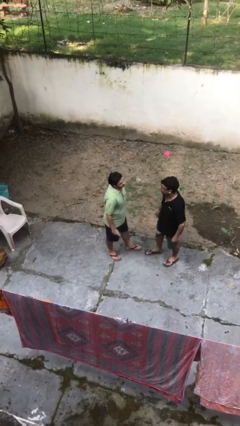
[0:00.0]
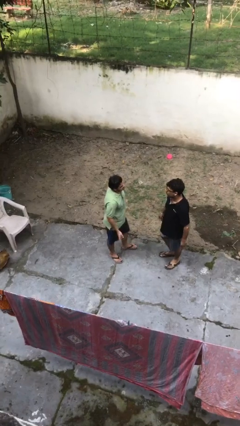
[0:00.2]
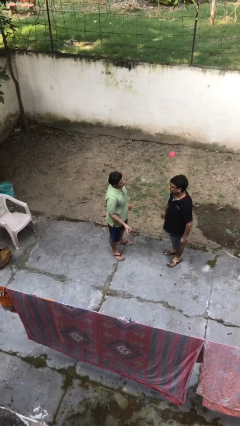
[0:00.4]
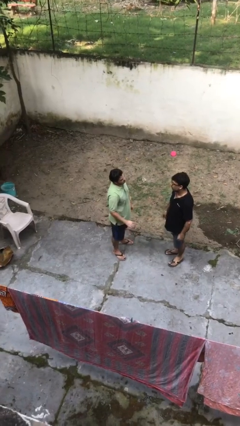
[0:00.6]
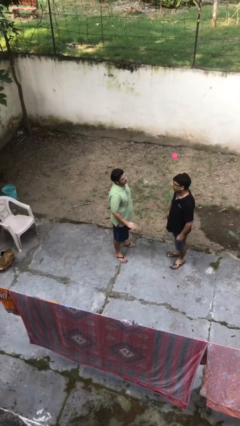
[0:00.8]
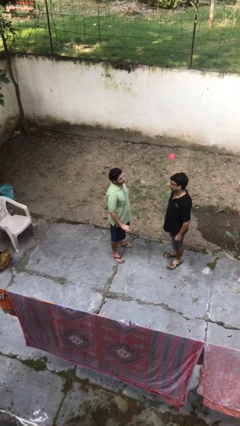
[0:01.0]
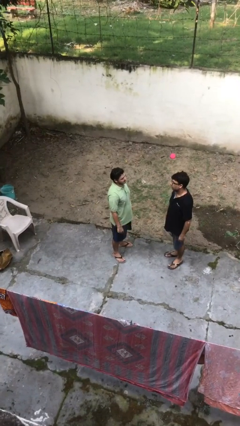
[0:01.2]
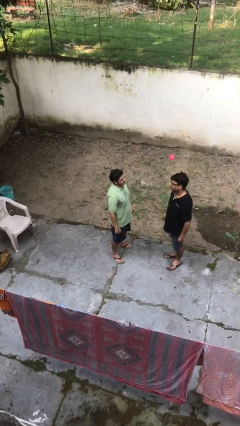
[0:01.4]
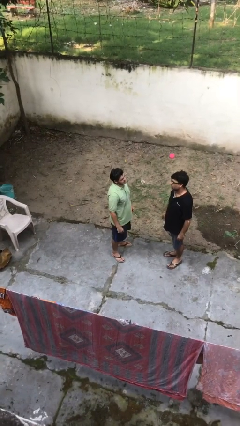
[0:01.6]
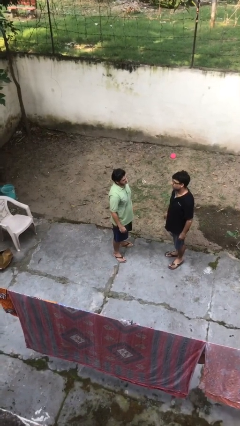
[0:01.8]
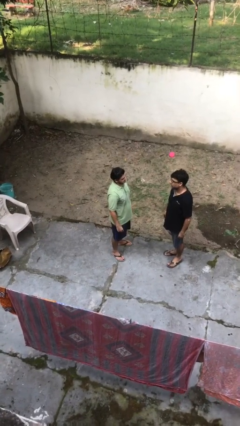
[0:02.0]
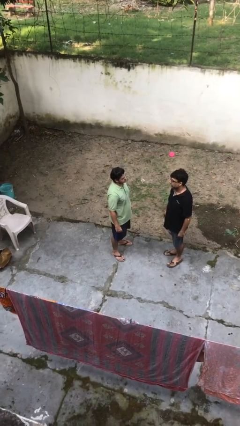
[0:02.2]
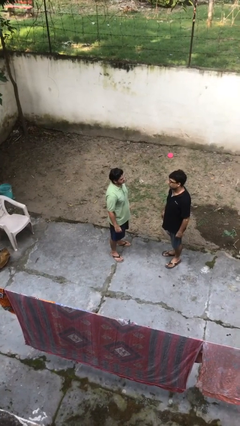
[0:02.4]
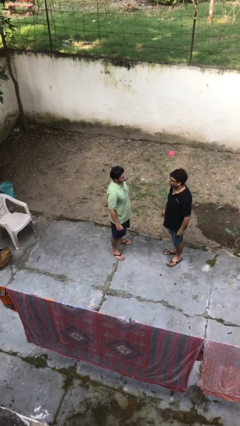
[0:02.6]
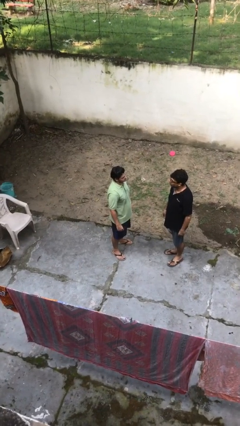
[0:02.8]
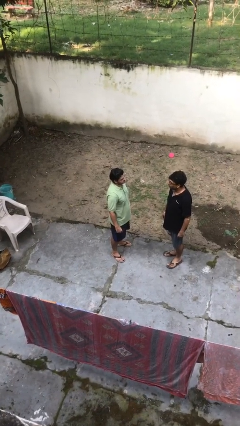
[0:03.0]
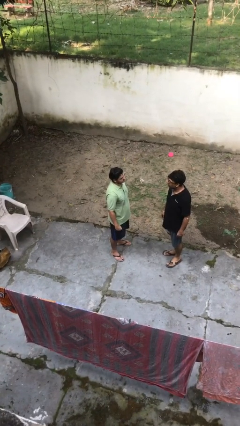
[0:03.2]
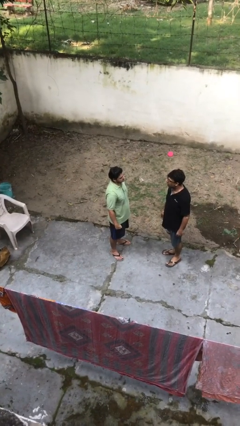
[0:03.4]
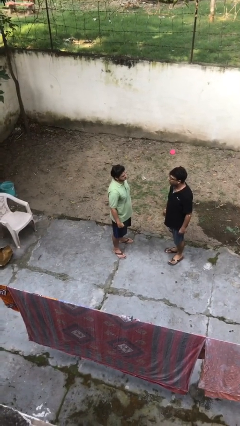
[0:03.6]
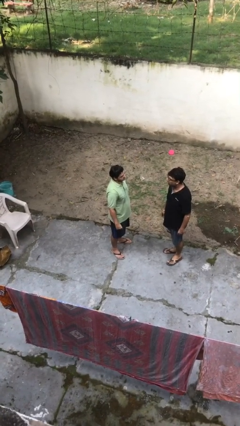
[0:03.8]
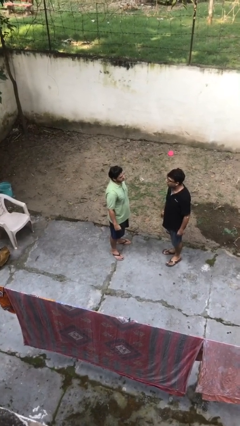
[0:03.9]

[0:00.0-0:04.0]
person talks to person

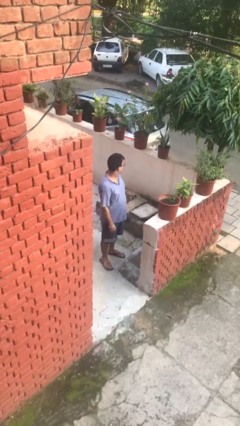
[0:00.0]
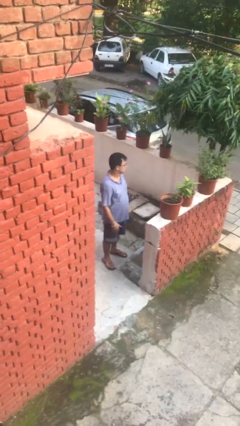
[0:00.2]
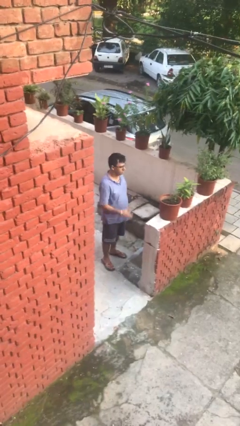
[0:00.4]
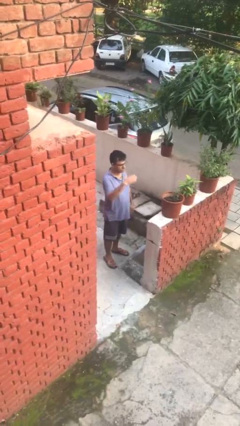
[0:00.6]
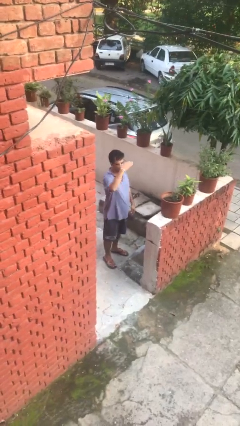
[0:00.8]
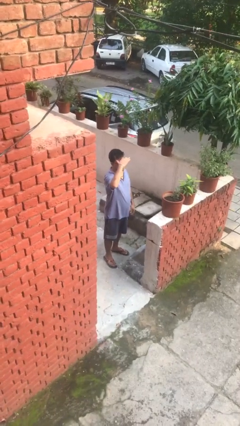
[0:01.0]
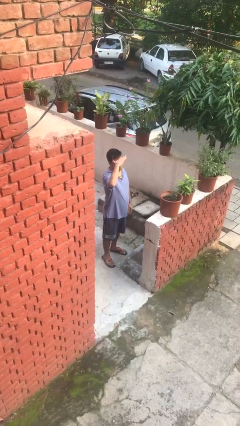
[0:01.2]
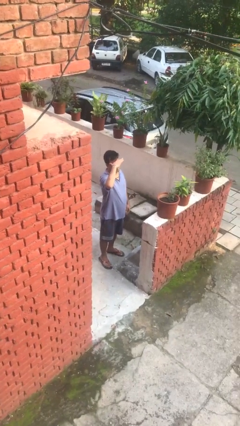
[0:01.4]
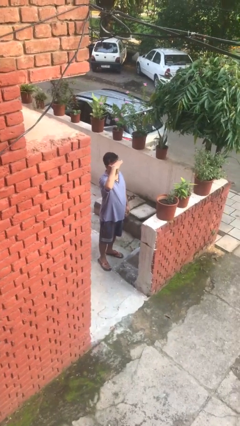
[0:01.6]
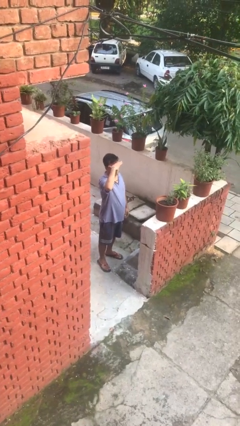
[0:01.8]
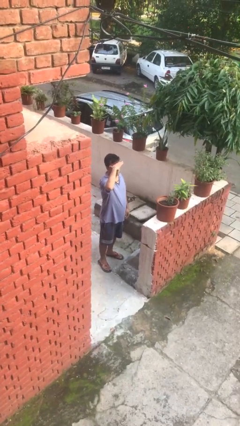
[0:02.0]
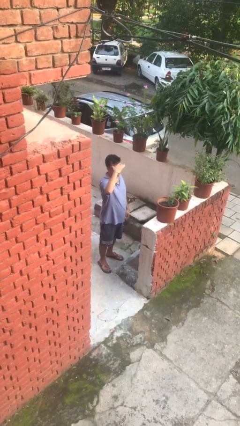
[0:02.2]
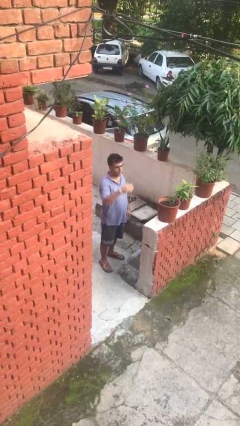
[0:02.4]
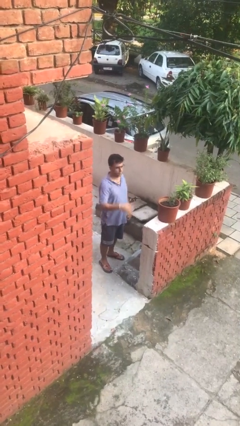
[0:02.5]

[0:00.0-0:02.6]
person shades eyes

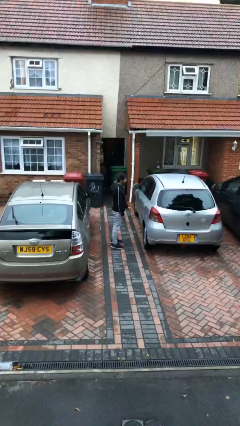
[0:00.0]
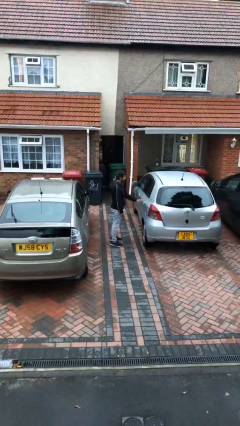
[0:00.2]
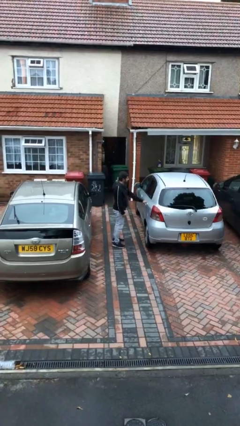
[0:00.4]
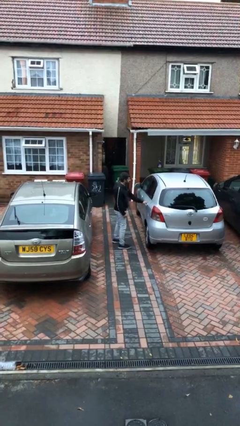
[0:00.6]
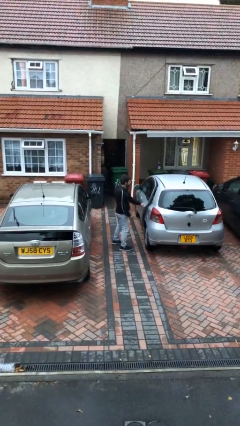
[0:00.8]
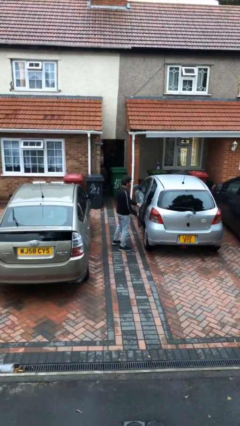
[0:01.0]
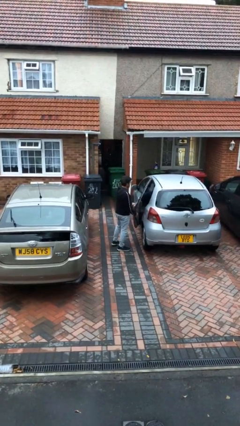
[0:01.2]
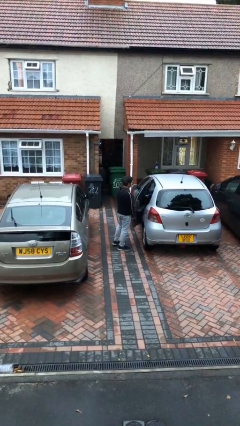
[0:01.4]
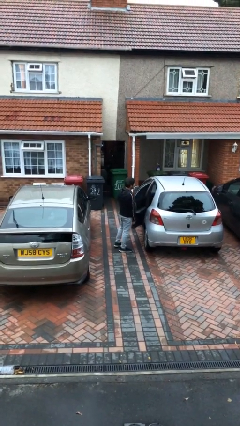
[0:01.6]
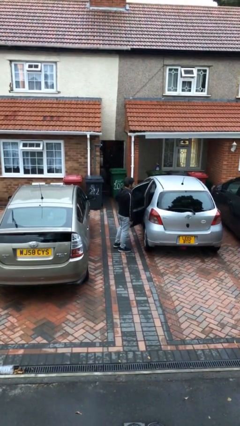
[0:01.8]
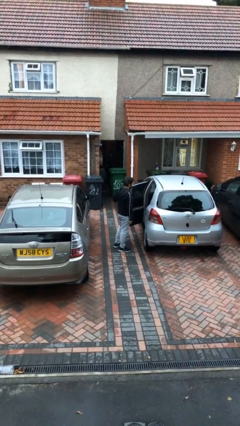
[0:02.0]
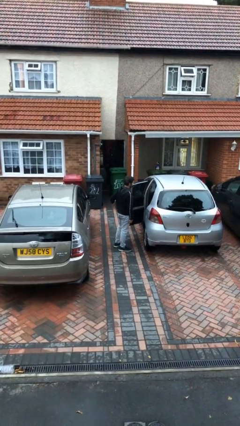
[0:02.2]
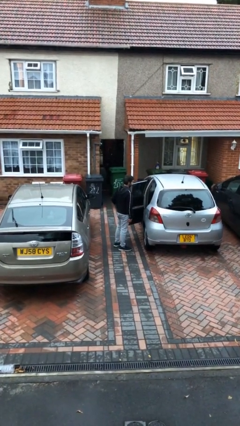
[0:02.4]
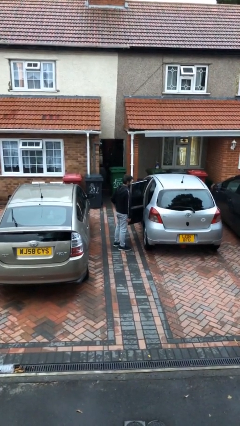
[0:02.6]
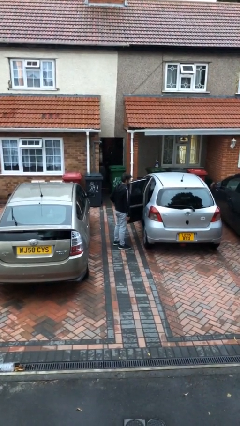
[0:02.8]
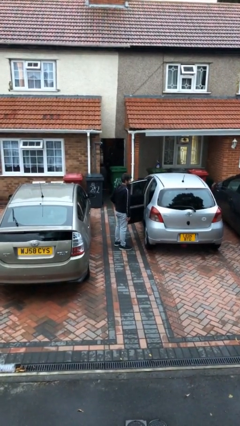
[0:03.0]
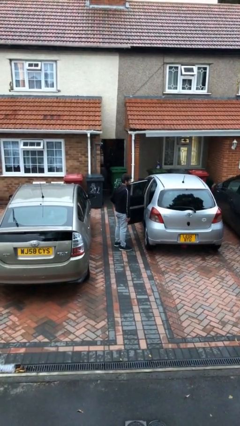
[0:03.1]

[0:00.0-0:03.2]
person opens car door

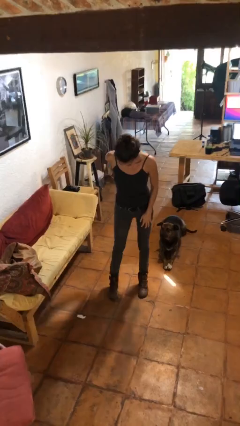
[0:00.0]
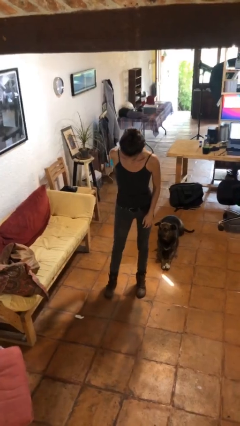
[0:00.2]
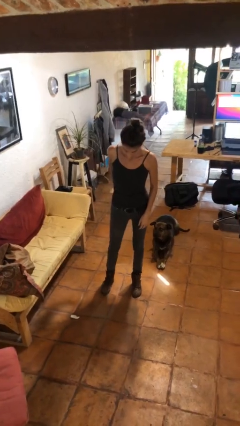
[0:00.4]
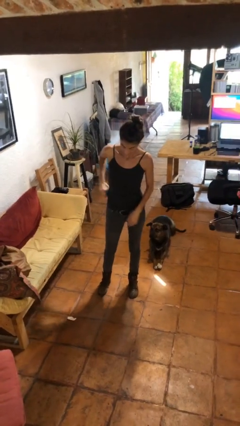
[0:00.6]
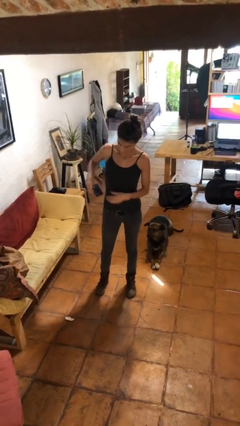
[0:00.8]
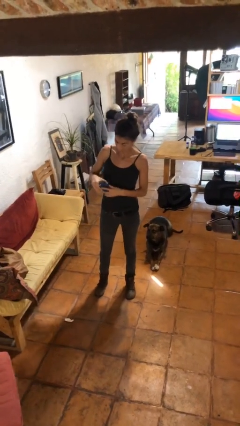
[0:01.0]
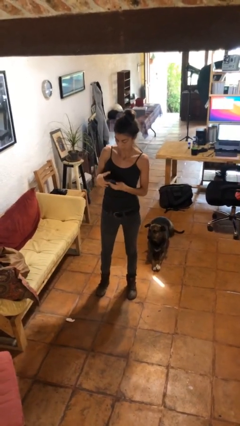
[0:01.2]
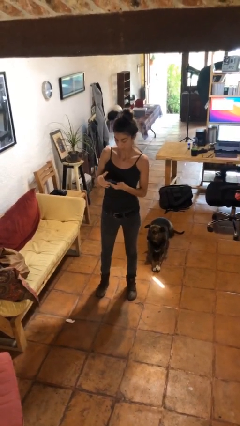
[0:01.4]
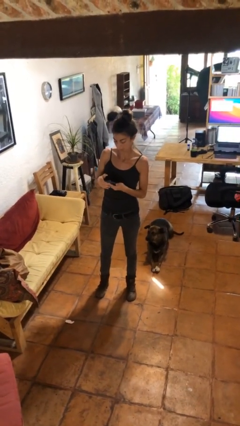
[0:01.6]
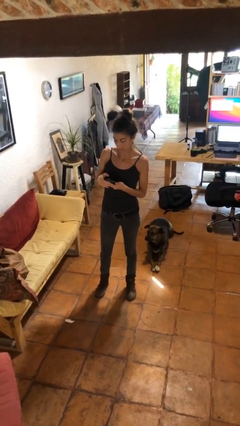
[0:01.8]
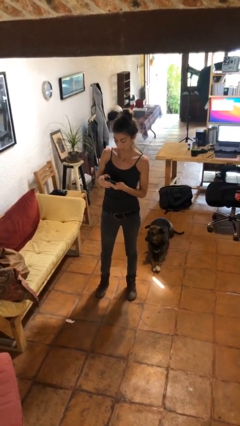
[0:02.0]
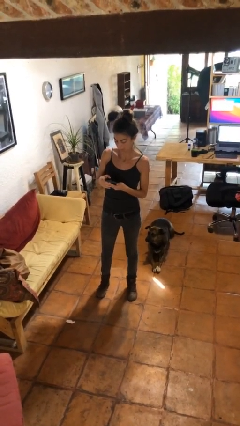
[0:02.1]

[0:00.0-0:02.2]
person takes phone from pocket

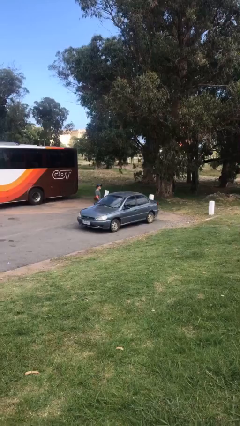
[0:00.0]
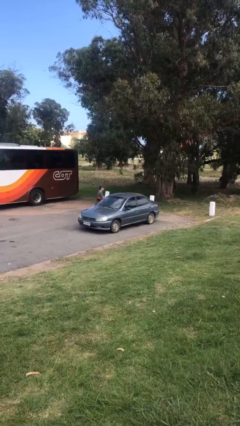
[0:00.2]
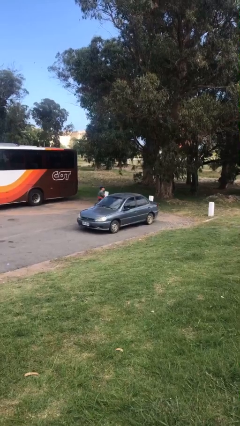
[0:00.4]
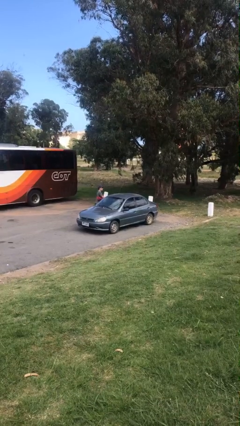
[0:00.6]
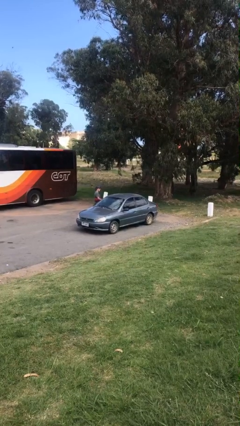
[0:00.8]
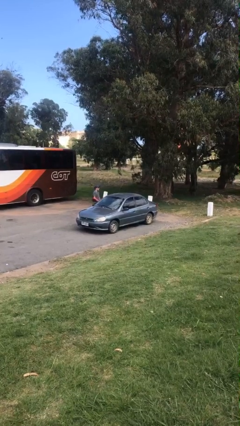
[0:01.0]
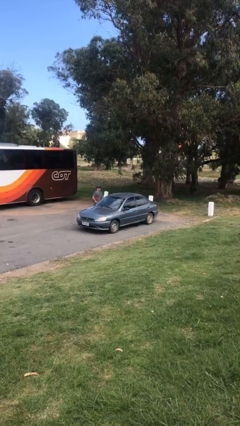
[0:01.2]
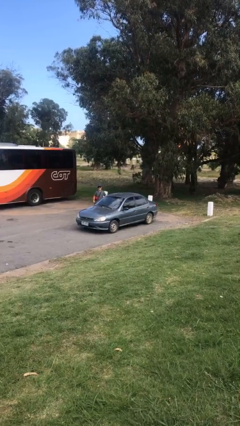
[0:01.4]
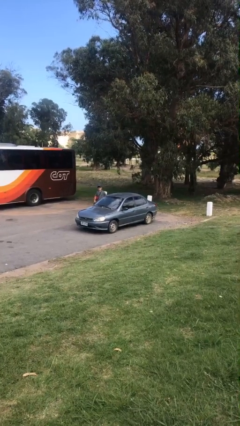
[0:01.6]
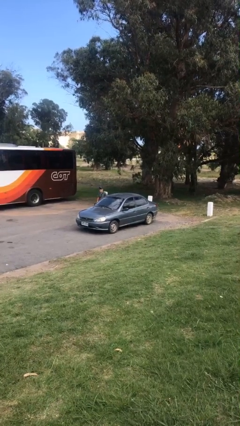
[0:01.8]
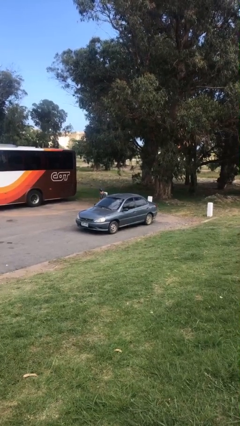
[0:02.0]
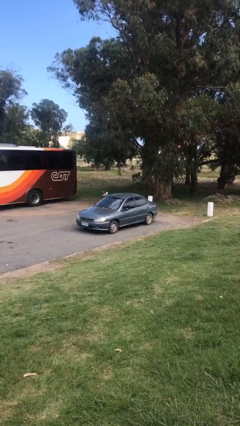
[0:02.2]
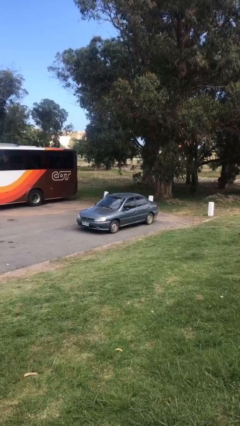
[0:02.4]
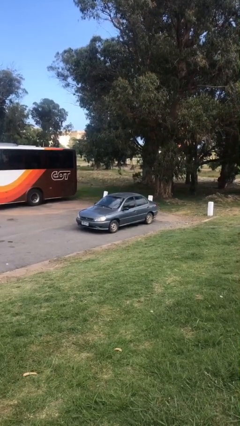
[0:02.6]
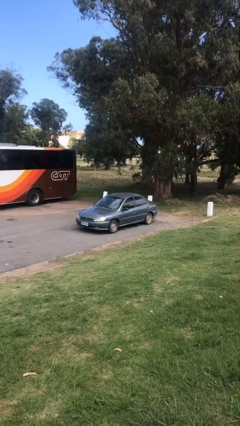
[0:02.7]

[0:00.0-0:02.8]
car picks up person

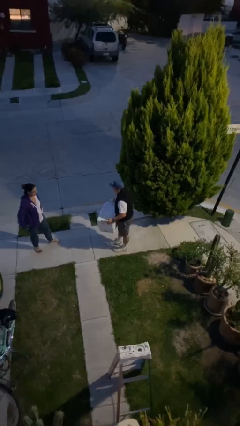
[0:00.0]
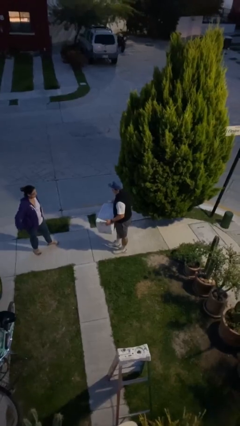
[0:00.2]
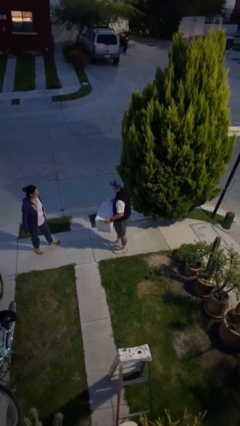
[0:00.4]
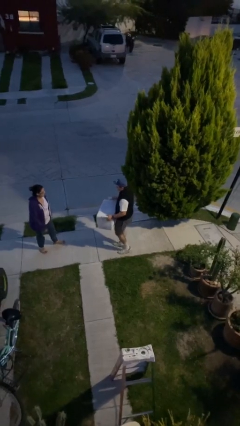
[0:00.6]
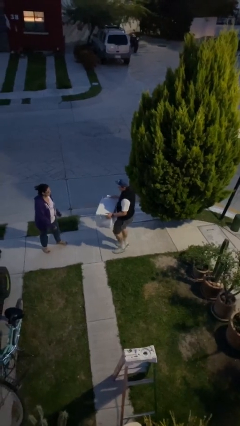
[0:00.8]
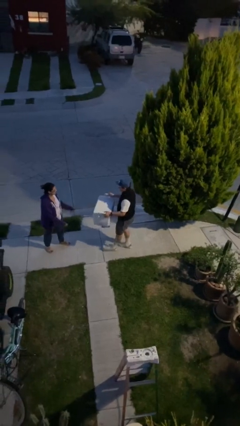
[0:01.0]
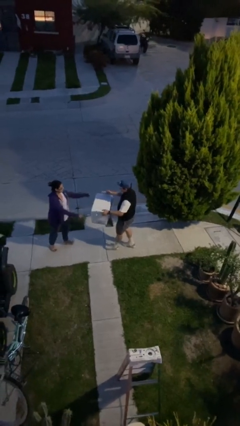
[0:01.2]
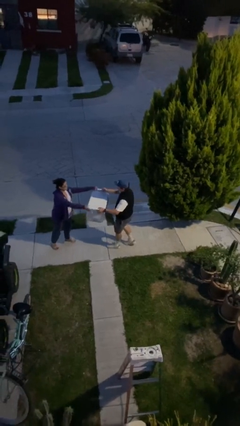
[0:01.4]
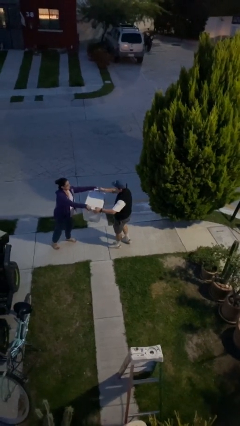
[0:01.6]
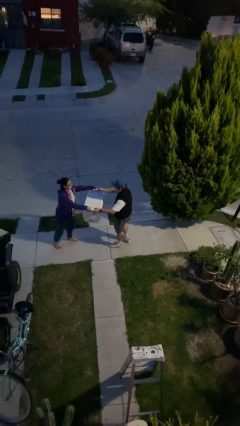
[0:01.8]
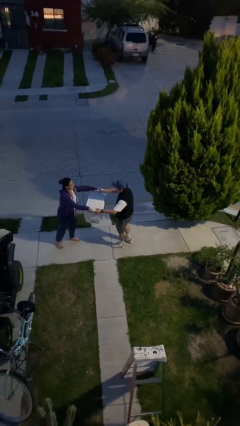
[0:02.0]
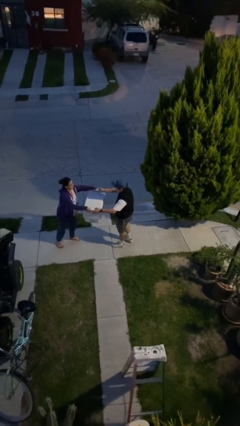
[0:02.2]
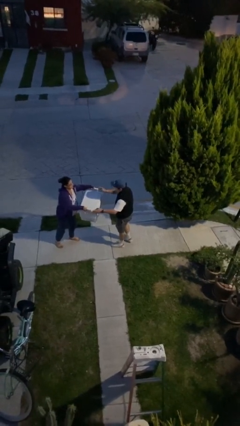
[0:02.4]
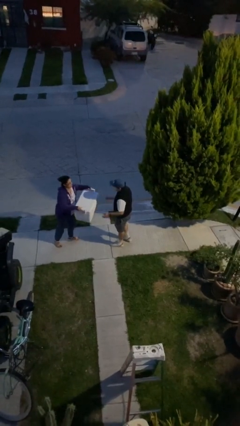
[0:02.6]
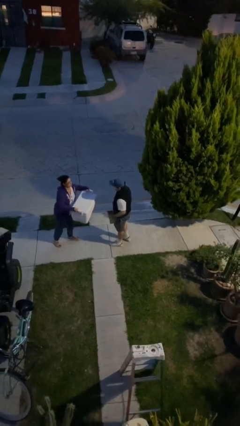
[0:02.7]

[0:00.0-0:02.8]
person transfers object to person
